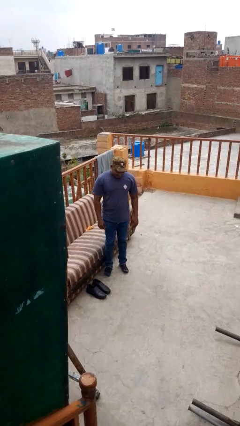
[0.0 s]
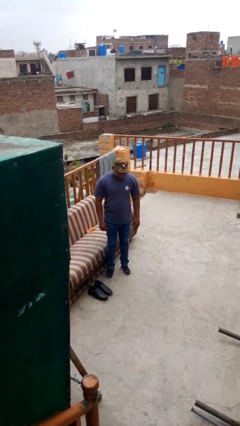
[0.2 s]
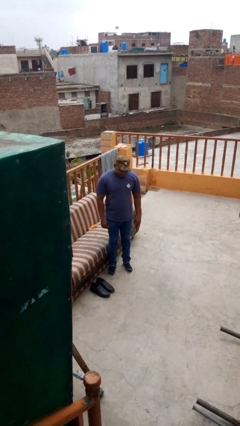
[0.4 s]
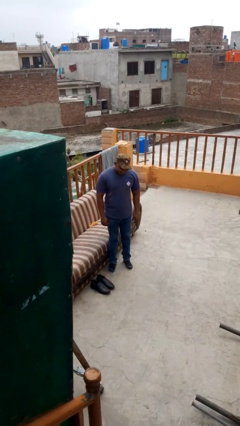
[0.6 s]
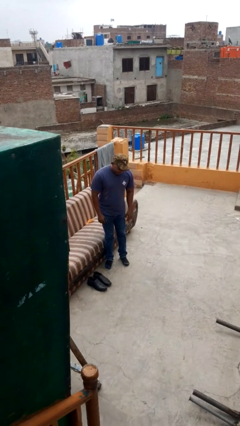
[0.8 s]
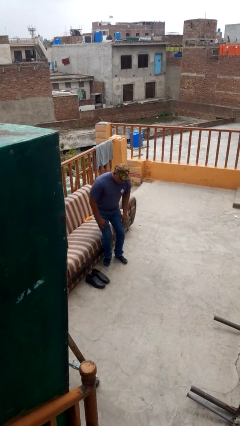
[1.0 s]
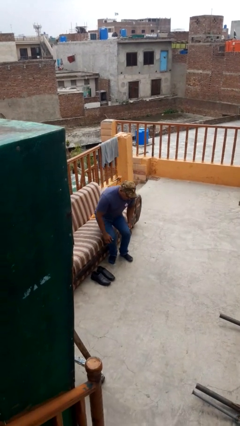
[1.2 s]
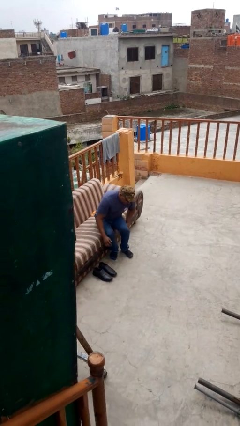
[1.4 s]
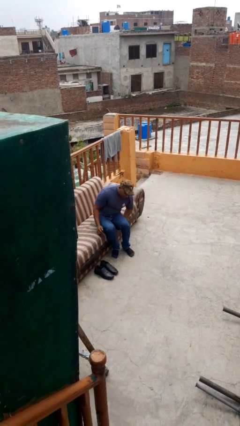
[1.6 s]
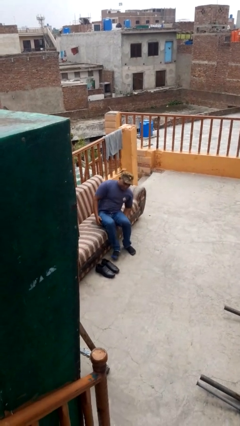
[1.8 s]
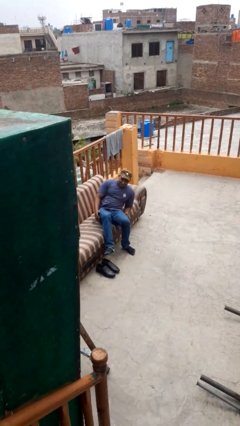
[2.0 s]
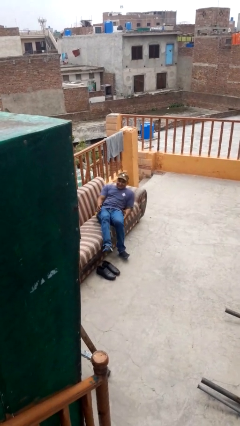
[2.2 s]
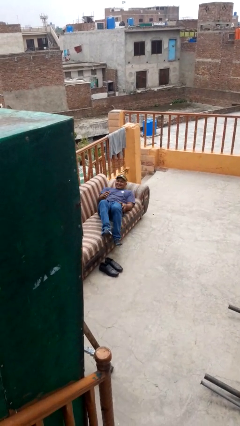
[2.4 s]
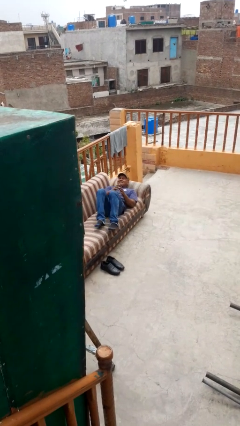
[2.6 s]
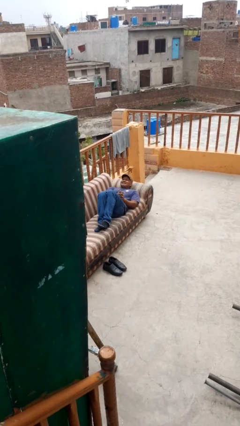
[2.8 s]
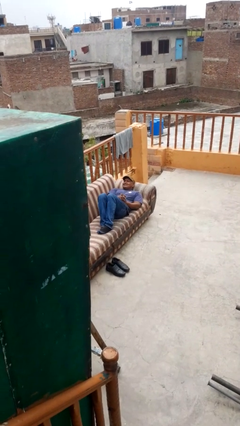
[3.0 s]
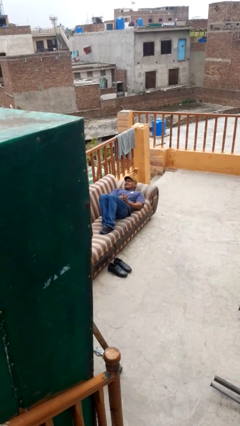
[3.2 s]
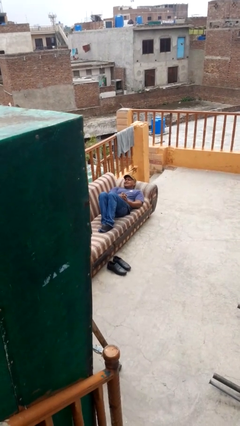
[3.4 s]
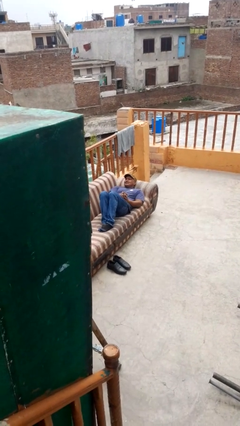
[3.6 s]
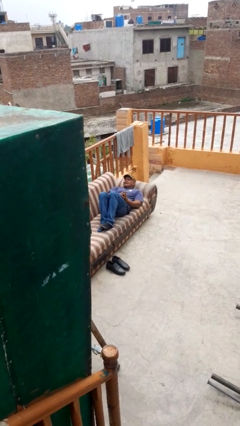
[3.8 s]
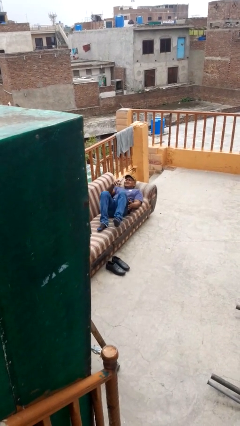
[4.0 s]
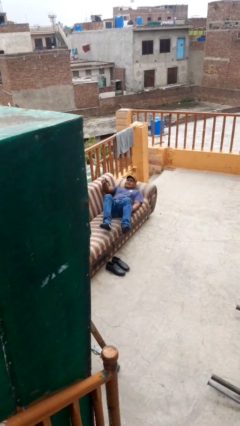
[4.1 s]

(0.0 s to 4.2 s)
person lies down on couch

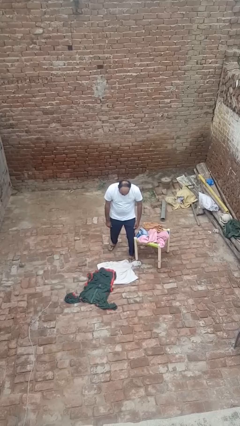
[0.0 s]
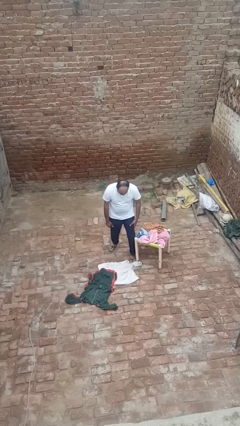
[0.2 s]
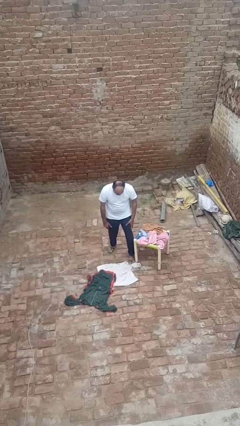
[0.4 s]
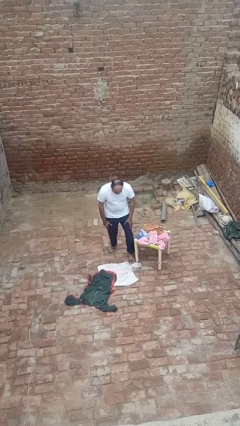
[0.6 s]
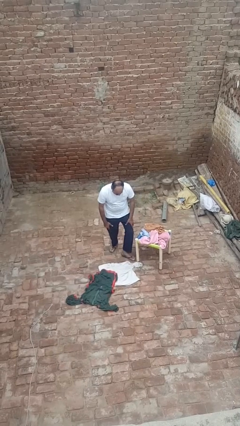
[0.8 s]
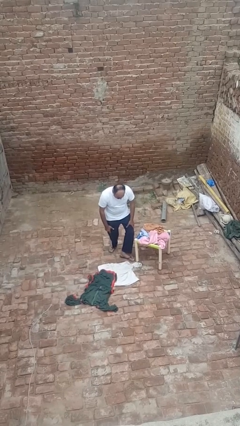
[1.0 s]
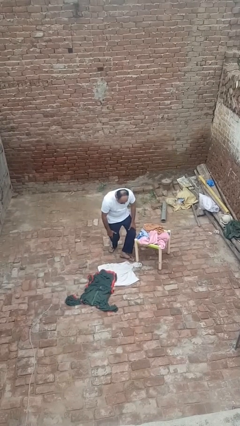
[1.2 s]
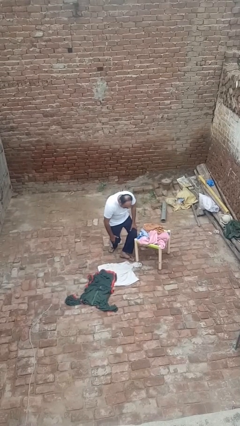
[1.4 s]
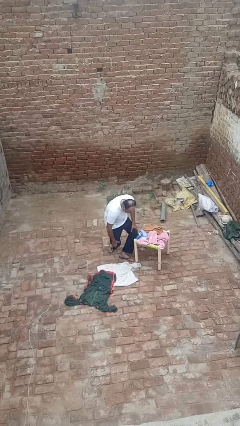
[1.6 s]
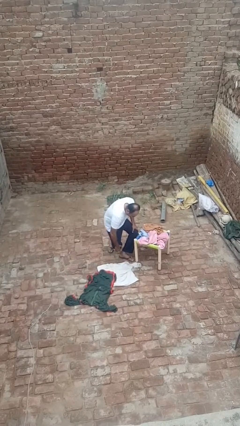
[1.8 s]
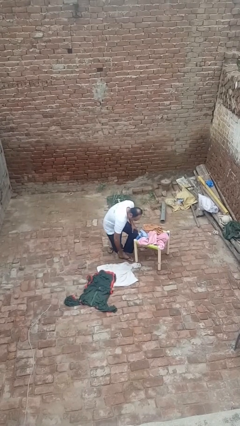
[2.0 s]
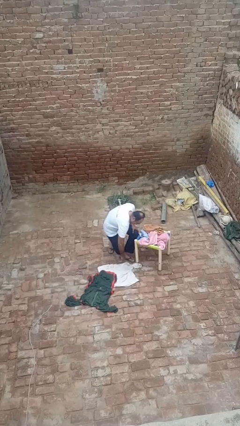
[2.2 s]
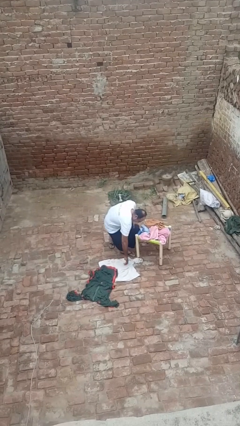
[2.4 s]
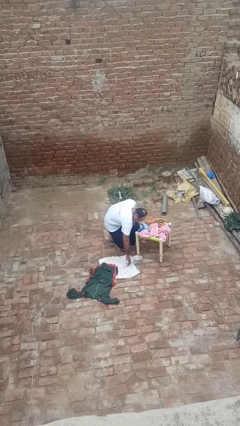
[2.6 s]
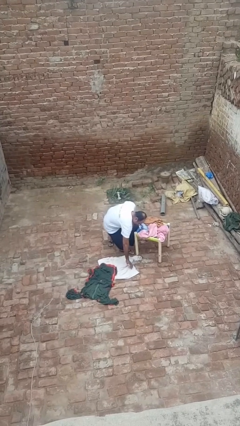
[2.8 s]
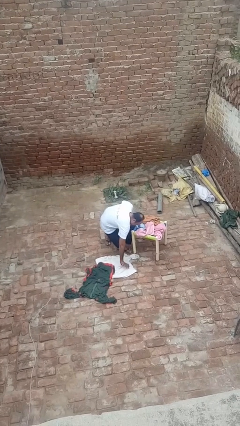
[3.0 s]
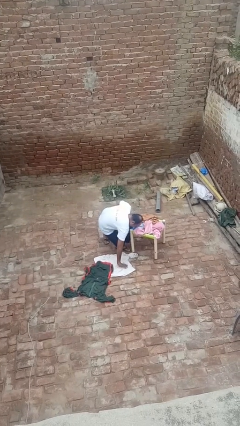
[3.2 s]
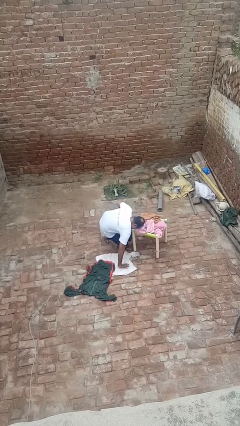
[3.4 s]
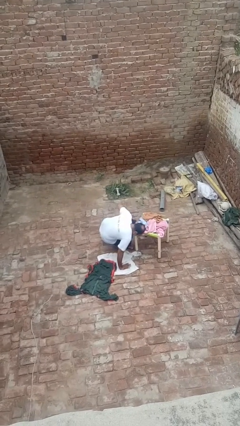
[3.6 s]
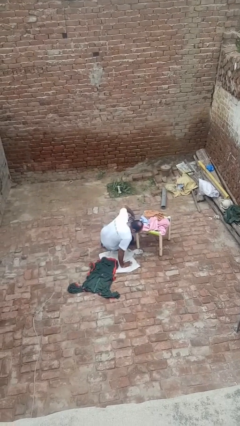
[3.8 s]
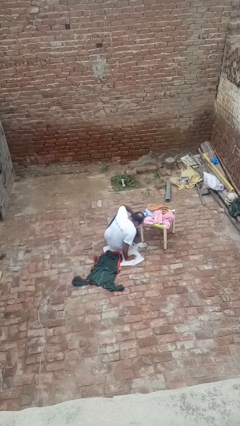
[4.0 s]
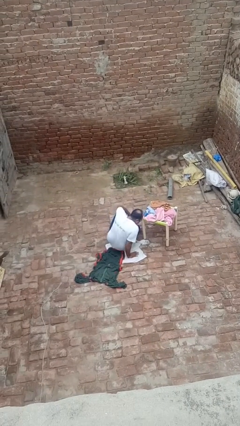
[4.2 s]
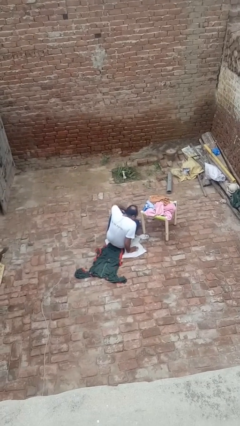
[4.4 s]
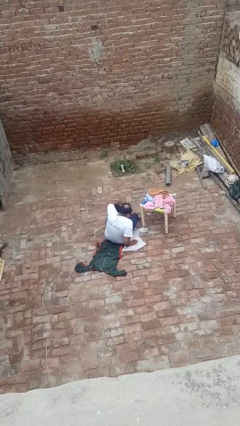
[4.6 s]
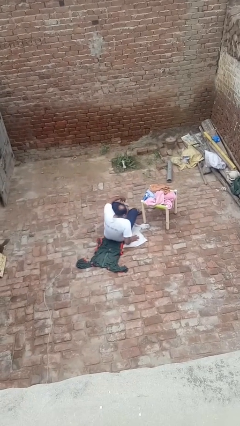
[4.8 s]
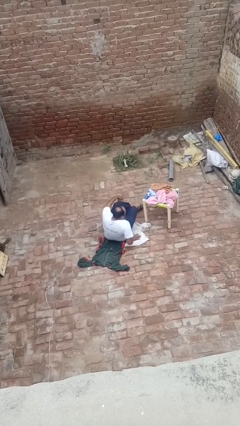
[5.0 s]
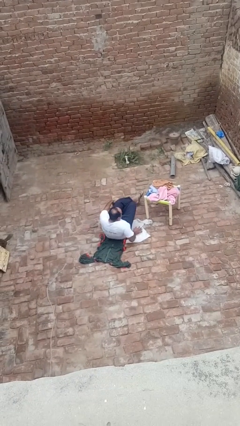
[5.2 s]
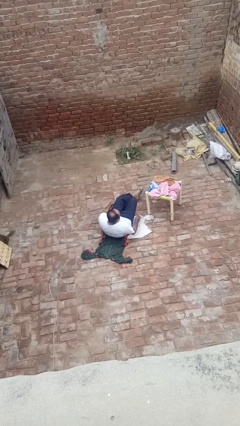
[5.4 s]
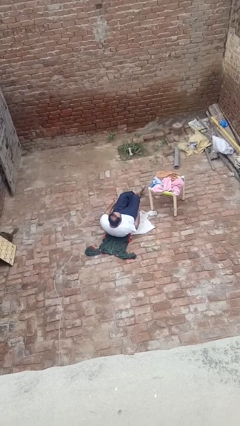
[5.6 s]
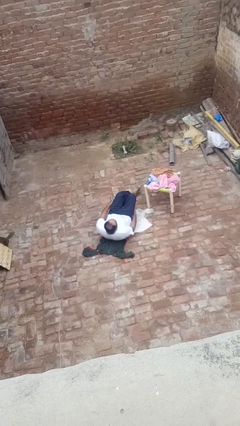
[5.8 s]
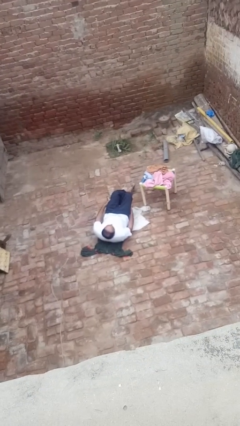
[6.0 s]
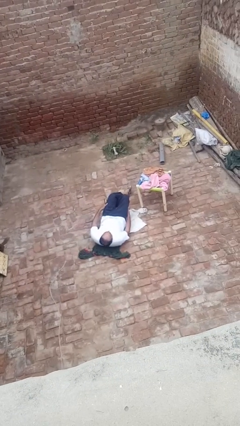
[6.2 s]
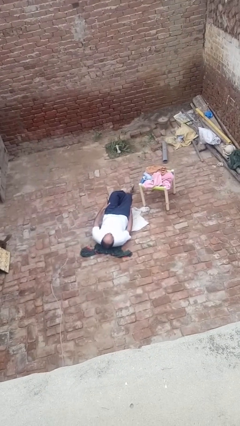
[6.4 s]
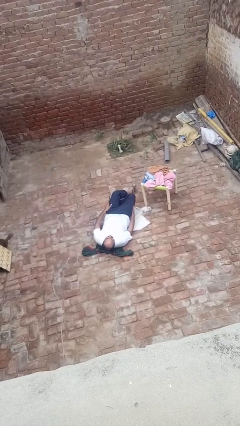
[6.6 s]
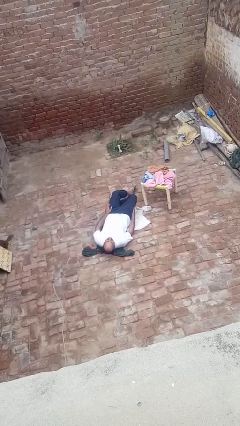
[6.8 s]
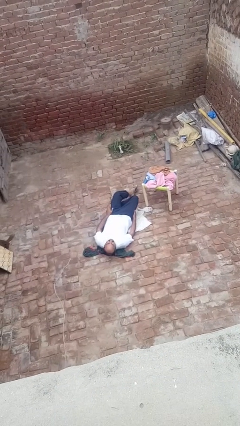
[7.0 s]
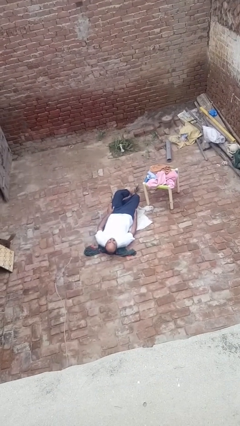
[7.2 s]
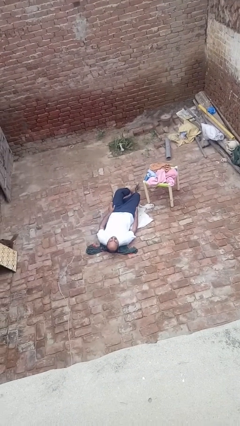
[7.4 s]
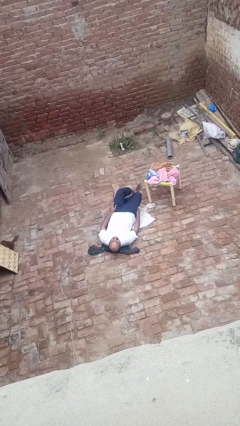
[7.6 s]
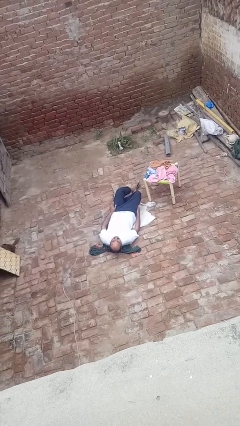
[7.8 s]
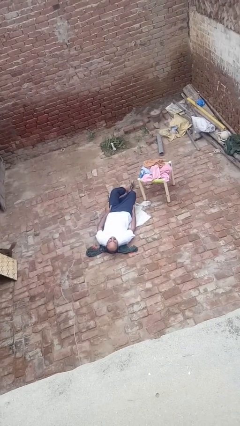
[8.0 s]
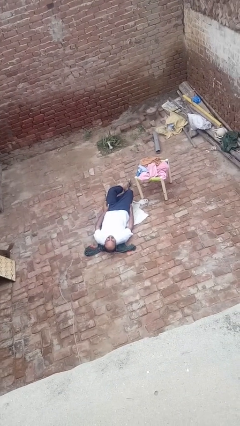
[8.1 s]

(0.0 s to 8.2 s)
person lies down on floor

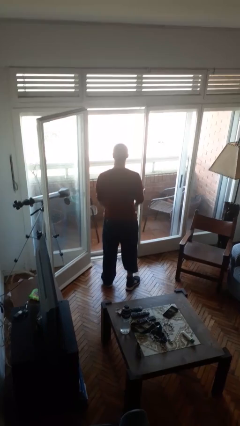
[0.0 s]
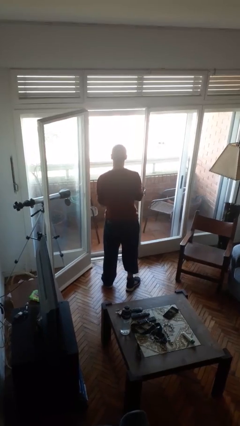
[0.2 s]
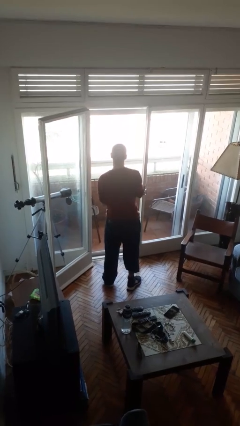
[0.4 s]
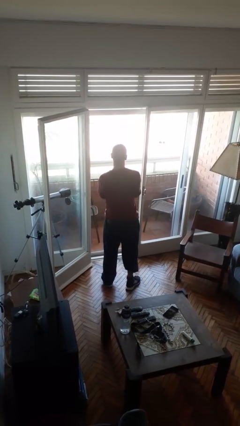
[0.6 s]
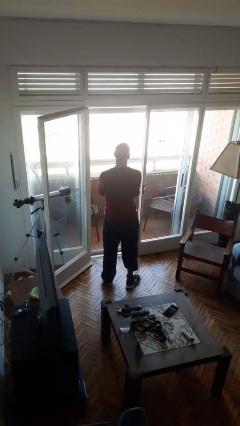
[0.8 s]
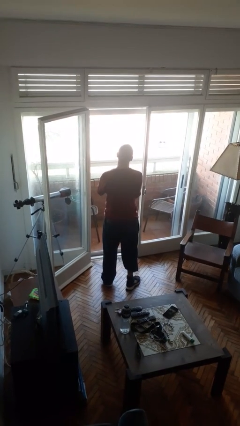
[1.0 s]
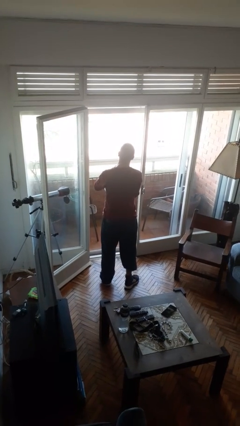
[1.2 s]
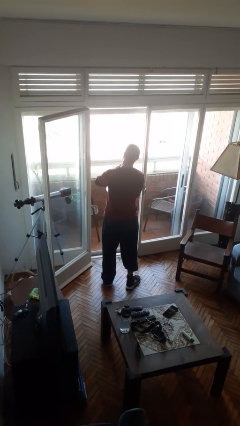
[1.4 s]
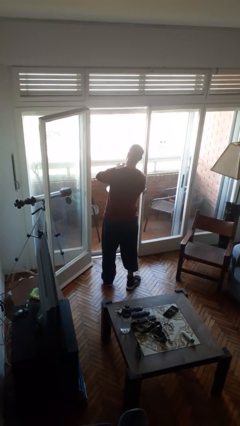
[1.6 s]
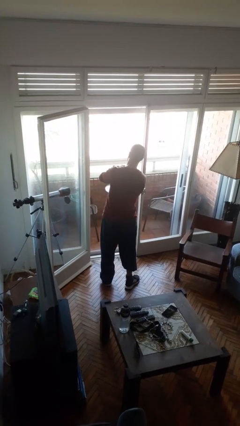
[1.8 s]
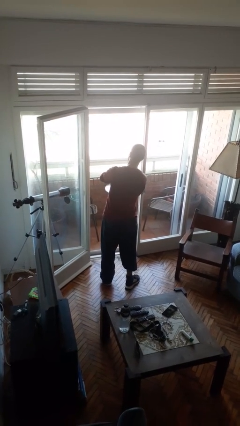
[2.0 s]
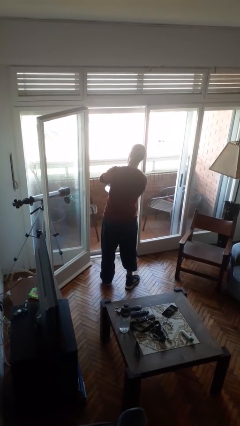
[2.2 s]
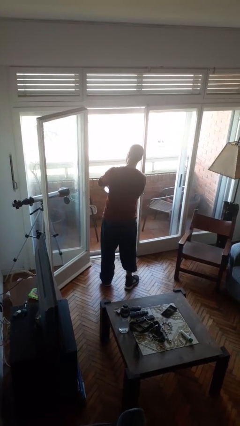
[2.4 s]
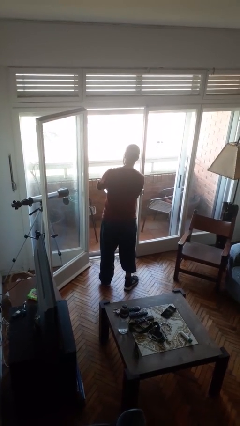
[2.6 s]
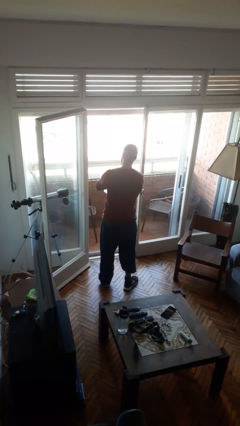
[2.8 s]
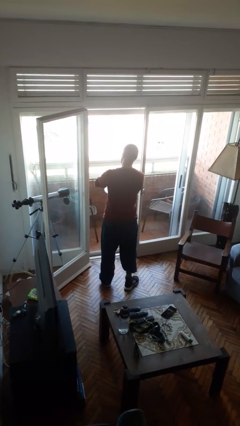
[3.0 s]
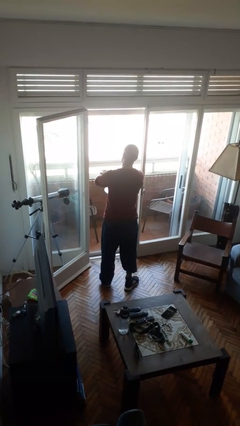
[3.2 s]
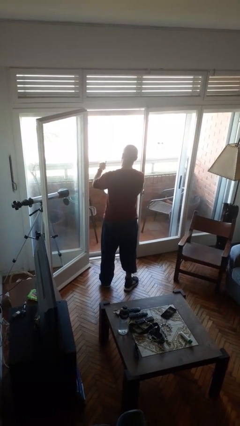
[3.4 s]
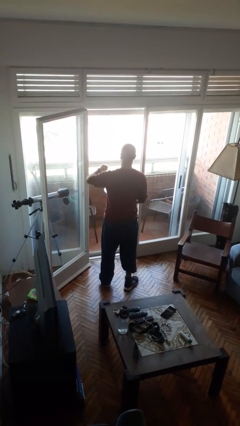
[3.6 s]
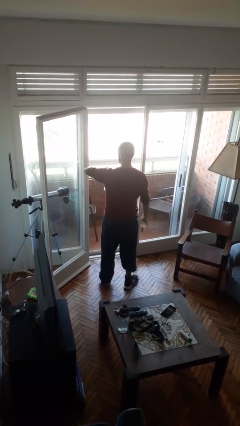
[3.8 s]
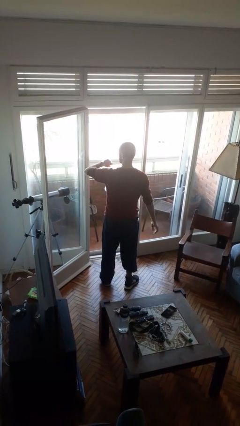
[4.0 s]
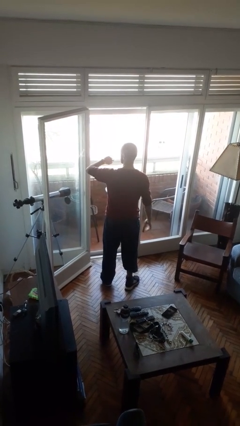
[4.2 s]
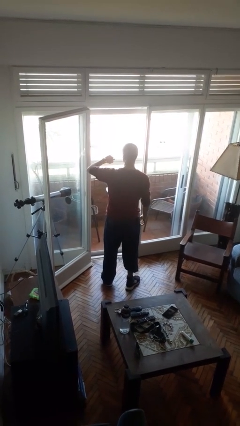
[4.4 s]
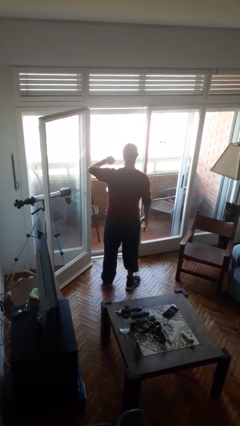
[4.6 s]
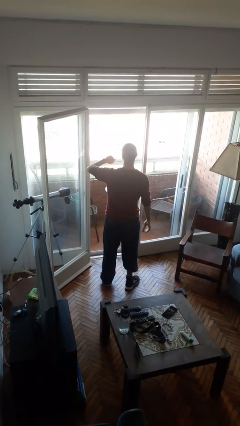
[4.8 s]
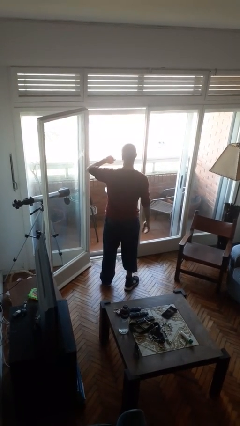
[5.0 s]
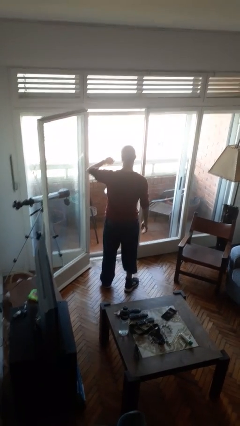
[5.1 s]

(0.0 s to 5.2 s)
person puts on wristwatch

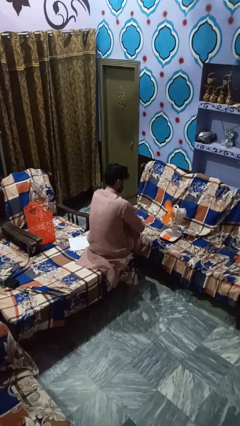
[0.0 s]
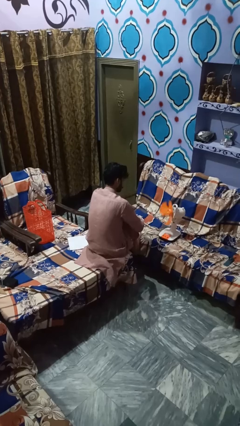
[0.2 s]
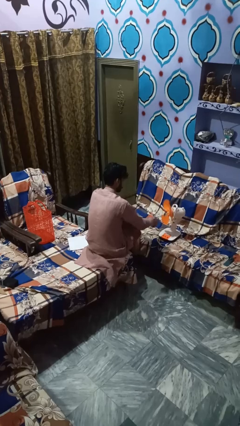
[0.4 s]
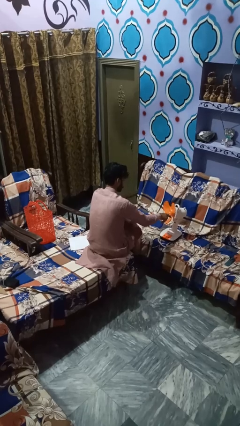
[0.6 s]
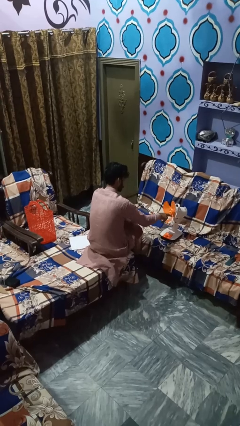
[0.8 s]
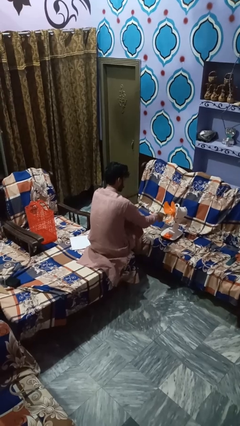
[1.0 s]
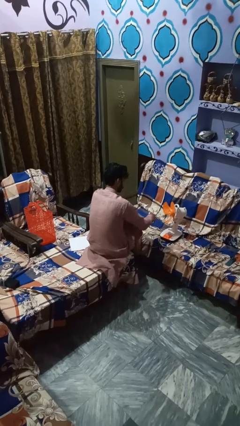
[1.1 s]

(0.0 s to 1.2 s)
person turns off fan
